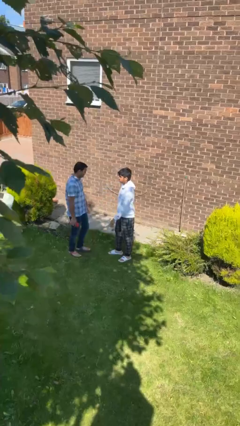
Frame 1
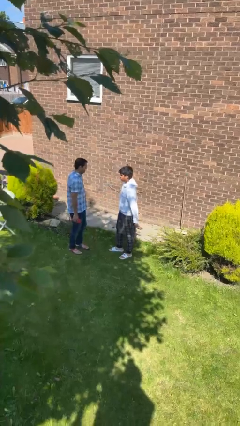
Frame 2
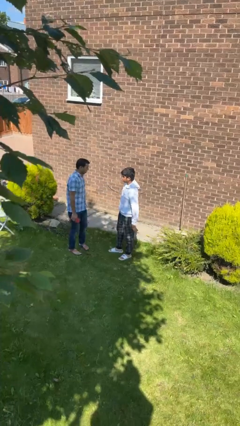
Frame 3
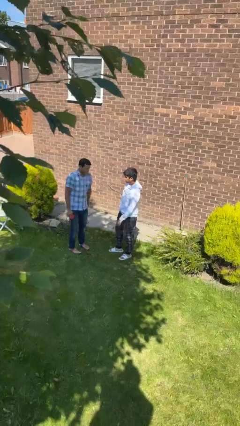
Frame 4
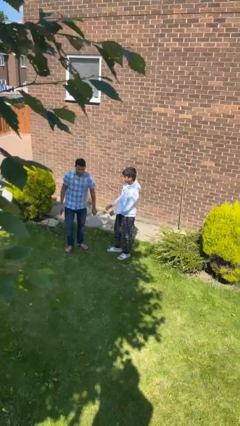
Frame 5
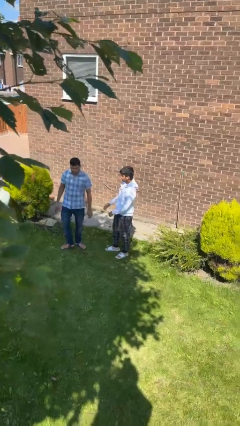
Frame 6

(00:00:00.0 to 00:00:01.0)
person spins person around

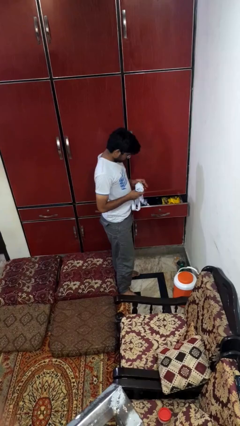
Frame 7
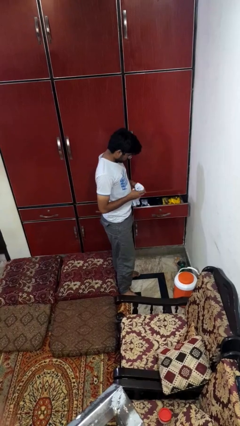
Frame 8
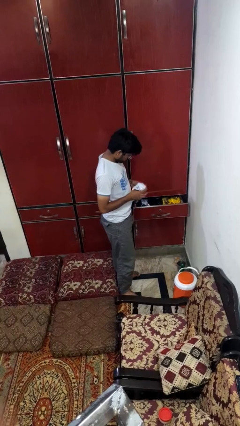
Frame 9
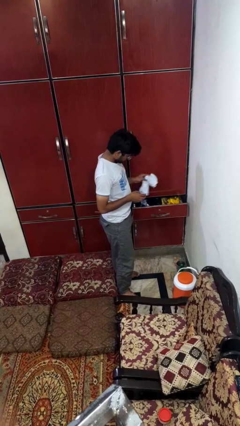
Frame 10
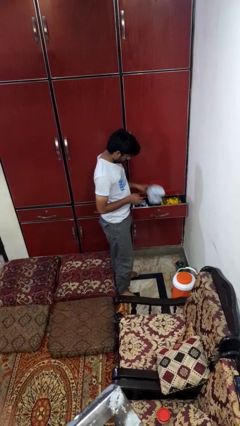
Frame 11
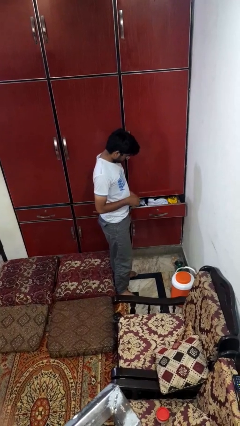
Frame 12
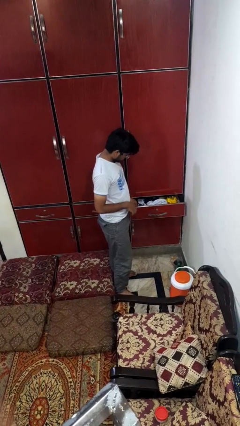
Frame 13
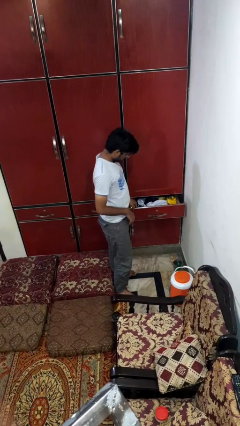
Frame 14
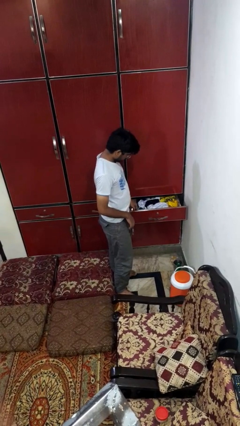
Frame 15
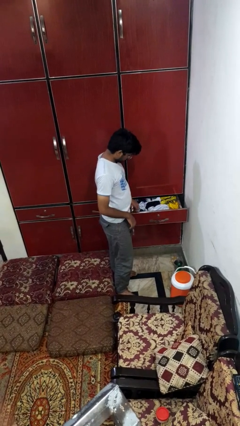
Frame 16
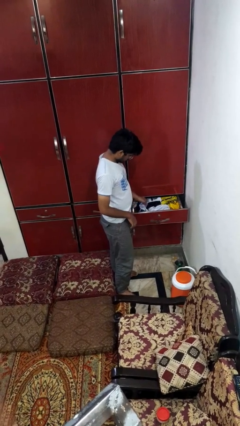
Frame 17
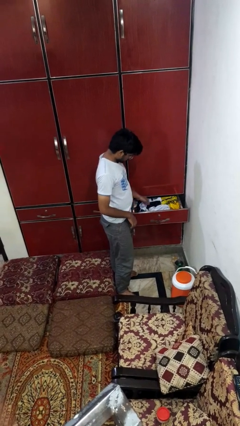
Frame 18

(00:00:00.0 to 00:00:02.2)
person puts clothes into dresser

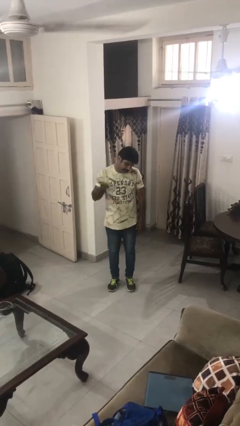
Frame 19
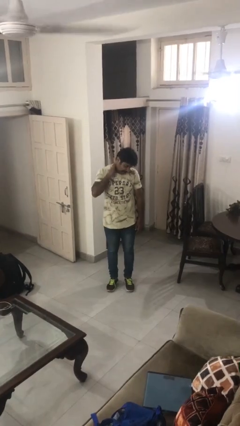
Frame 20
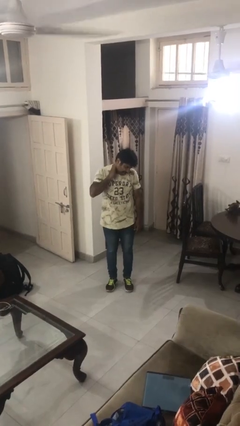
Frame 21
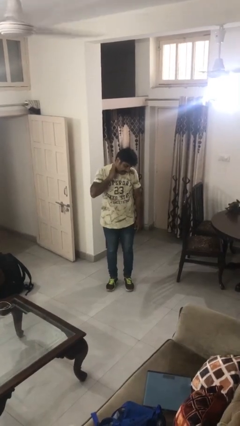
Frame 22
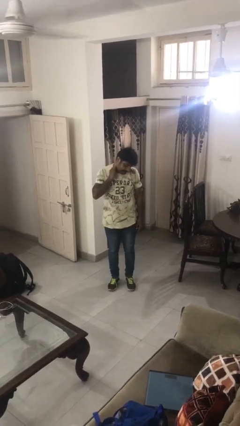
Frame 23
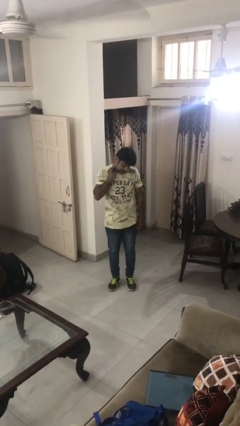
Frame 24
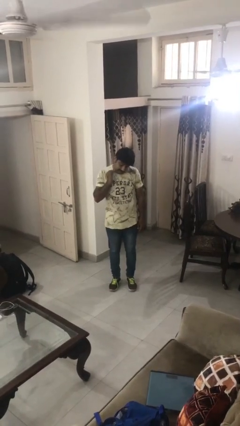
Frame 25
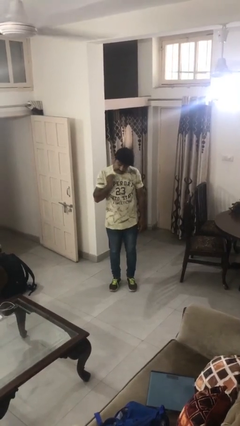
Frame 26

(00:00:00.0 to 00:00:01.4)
person swats bug

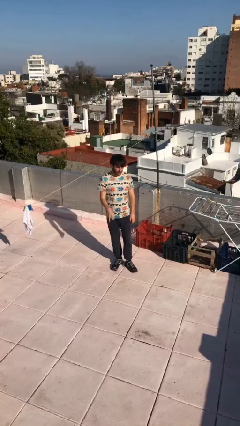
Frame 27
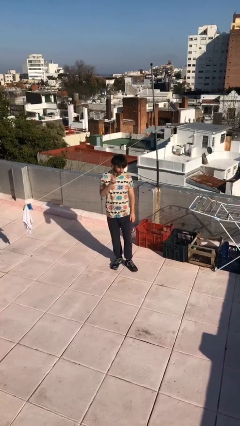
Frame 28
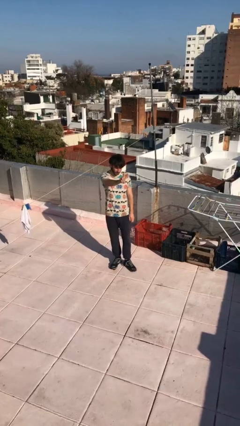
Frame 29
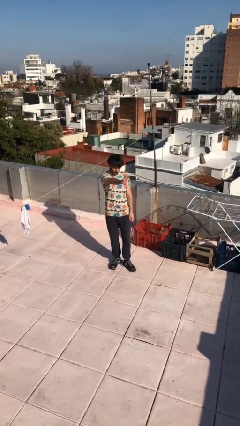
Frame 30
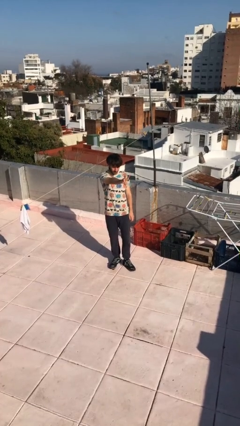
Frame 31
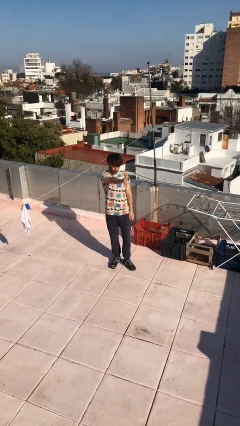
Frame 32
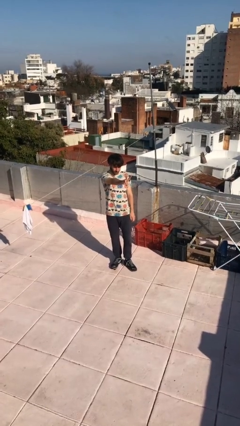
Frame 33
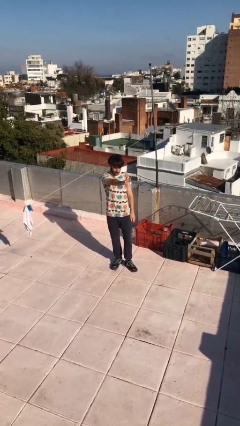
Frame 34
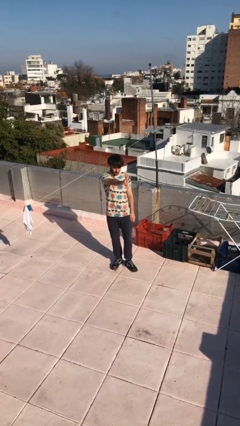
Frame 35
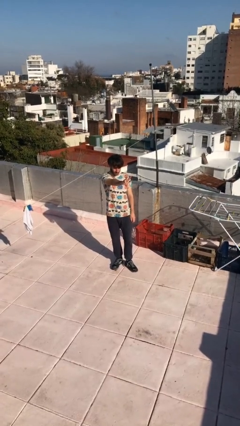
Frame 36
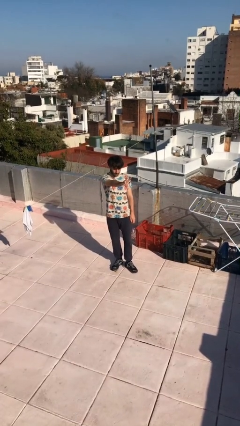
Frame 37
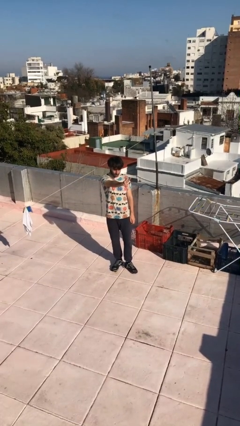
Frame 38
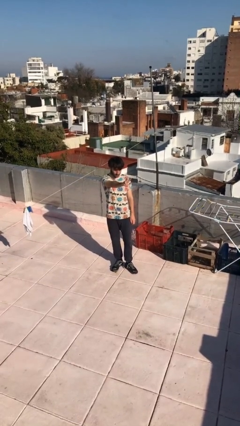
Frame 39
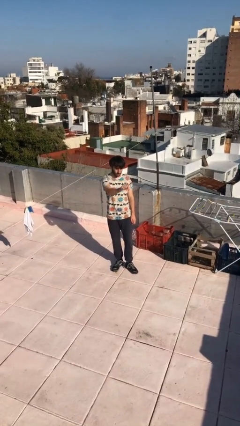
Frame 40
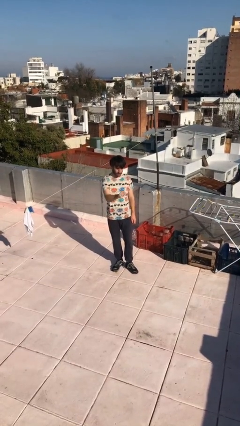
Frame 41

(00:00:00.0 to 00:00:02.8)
person gestures peace

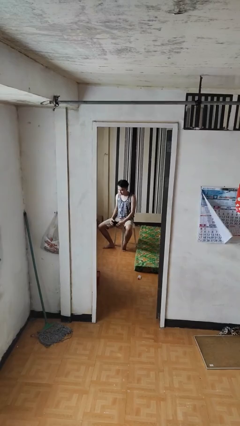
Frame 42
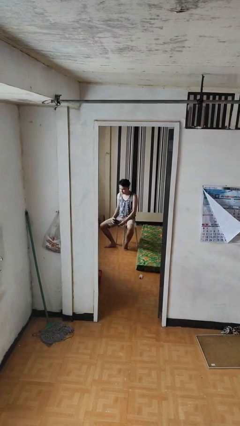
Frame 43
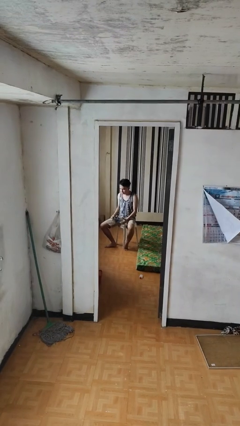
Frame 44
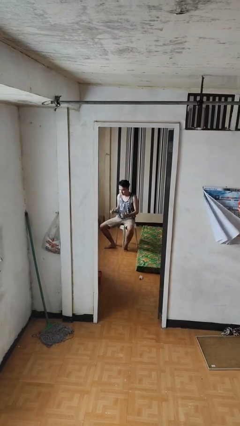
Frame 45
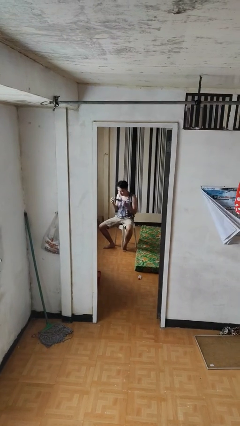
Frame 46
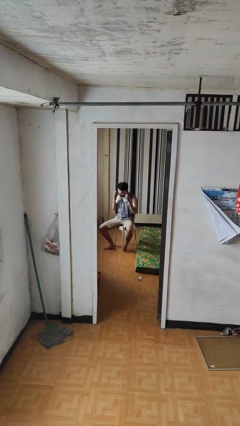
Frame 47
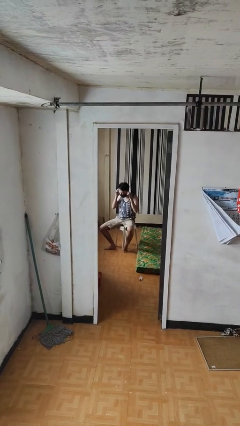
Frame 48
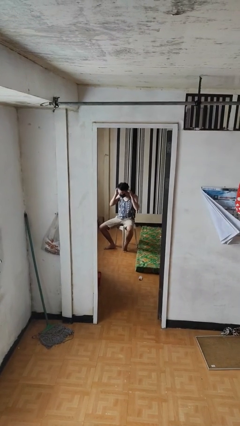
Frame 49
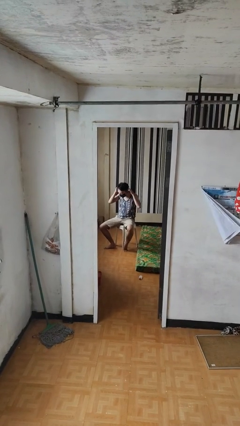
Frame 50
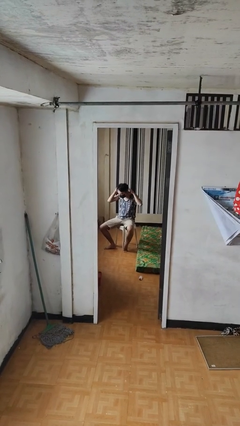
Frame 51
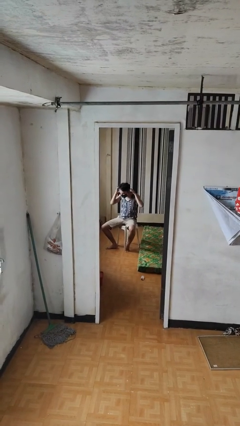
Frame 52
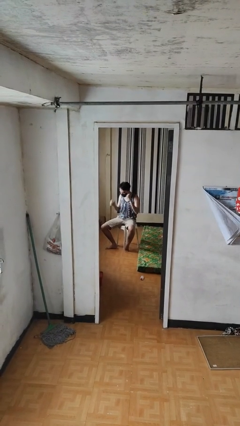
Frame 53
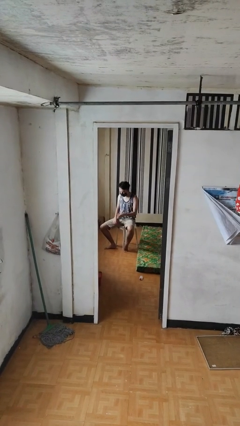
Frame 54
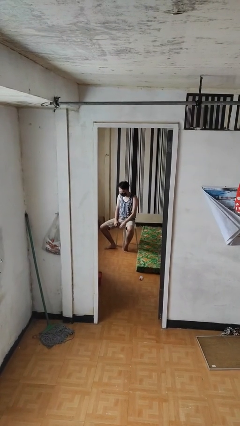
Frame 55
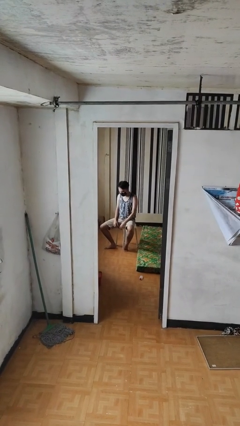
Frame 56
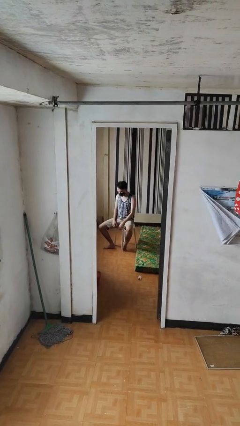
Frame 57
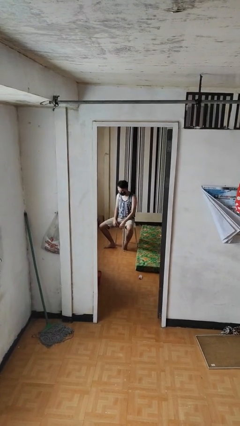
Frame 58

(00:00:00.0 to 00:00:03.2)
person puts on facemask

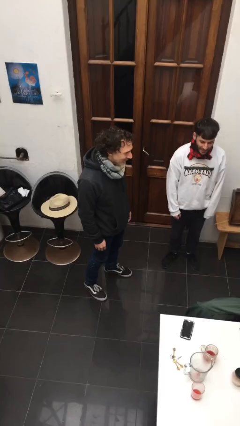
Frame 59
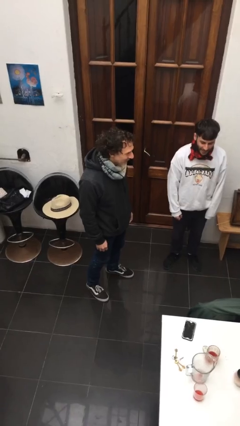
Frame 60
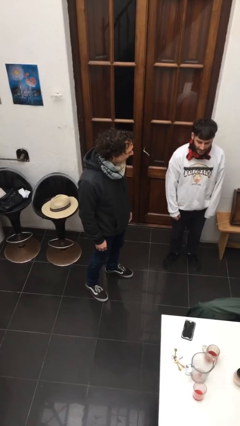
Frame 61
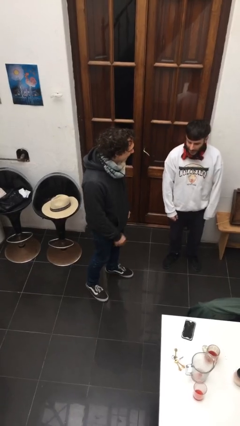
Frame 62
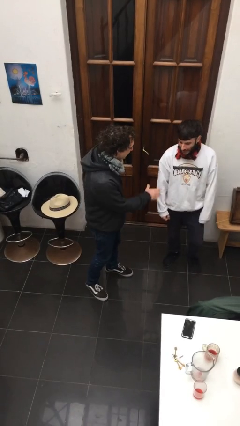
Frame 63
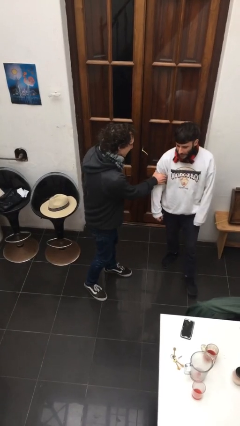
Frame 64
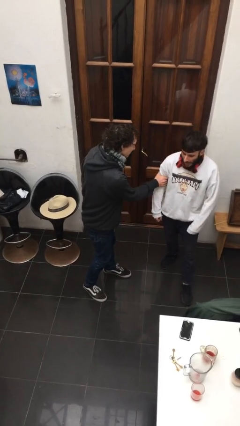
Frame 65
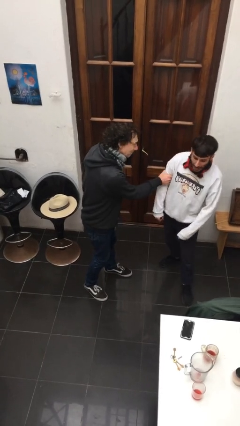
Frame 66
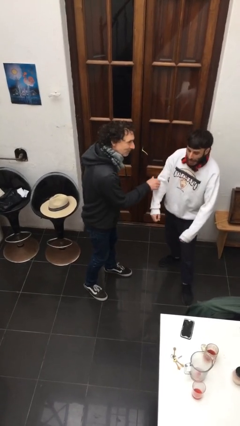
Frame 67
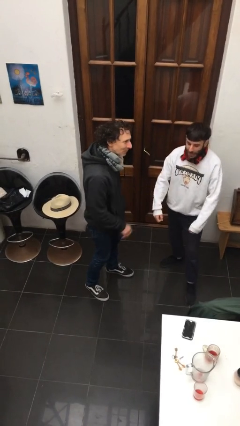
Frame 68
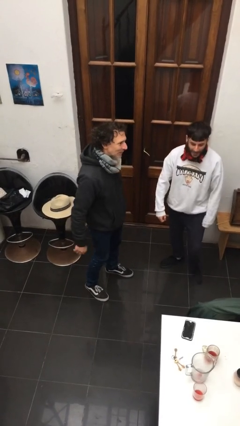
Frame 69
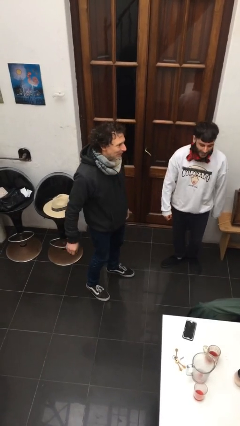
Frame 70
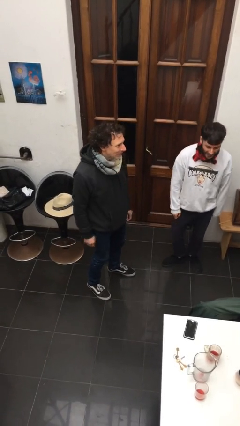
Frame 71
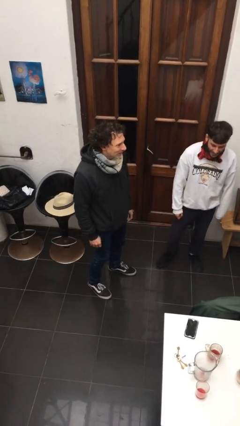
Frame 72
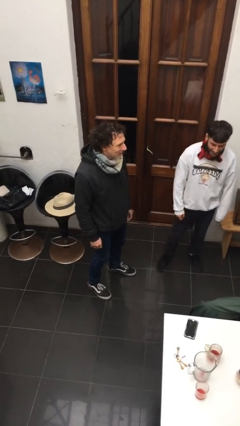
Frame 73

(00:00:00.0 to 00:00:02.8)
person grabs person by bicep

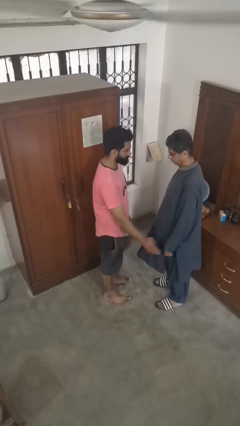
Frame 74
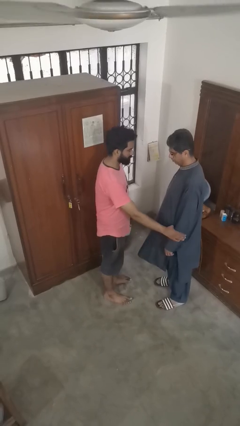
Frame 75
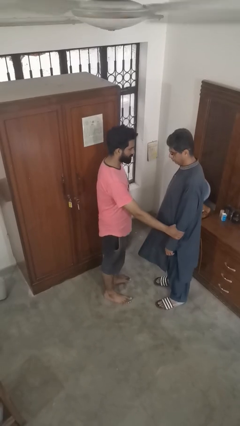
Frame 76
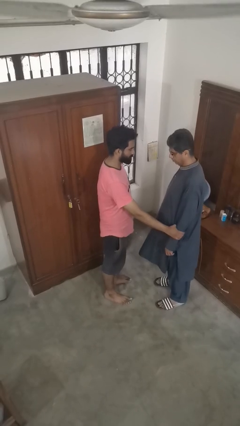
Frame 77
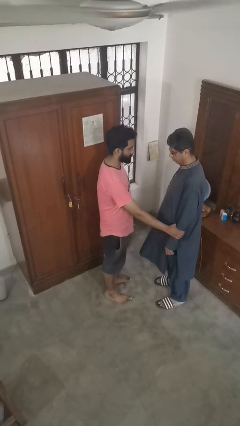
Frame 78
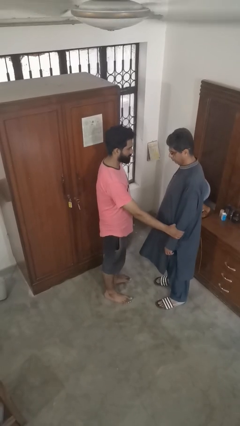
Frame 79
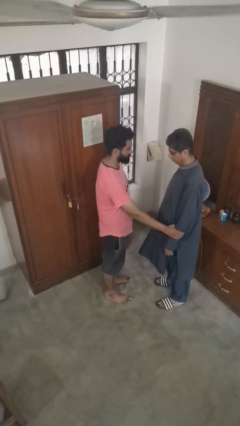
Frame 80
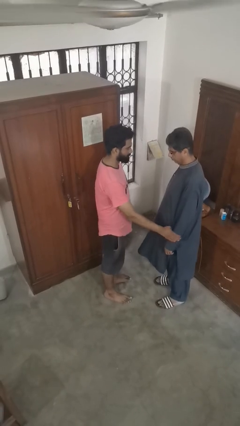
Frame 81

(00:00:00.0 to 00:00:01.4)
person grabs person by forearm

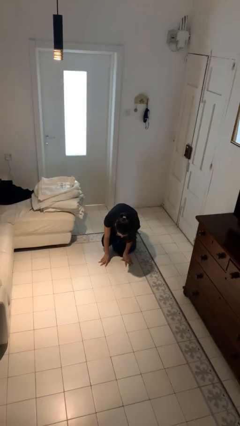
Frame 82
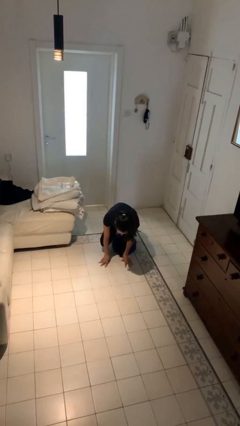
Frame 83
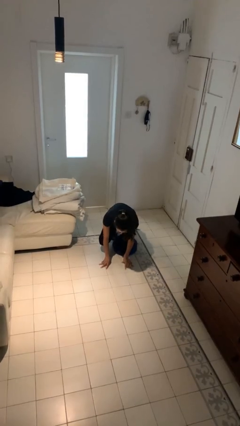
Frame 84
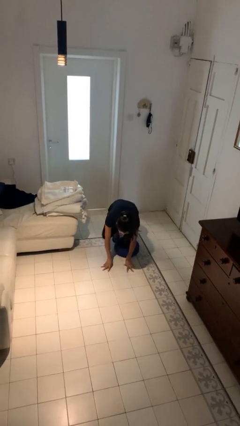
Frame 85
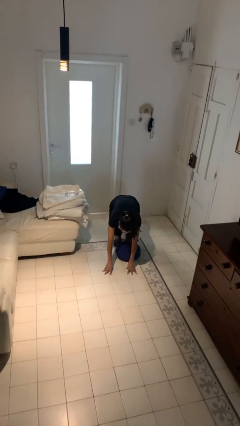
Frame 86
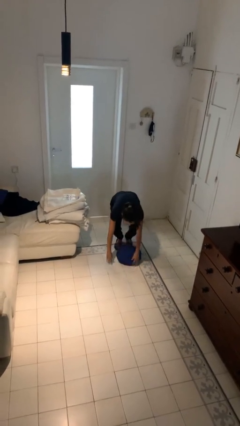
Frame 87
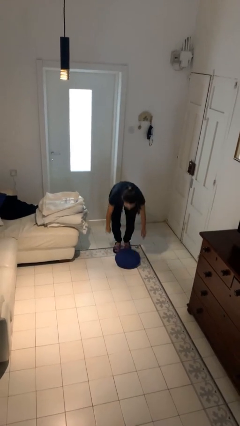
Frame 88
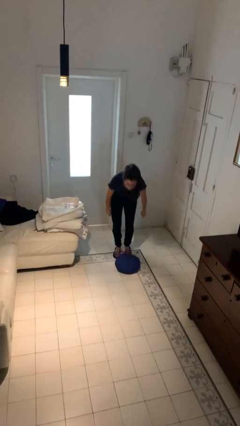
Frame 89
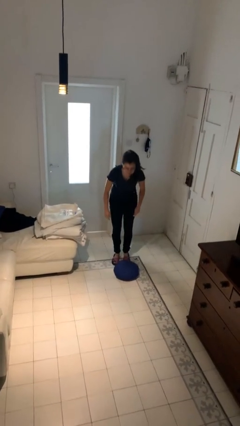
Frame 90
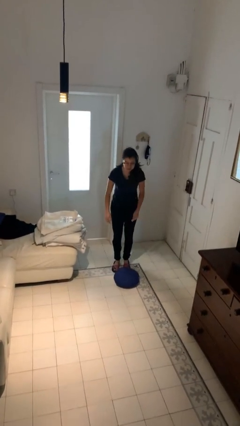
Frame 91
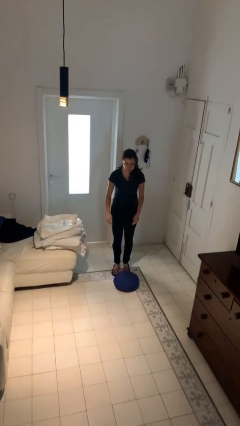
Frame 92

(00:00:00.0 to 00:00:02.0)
person stands up from floor
